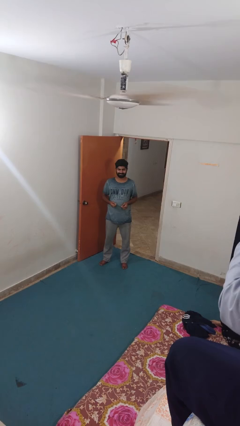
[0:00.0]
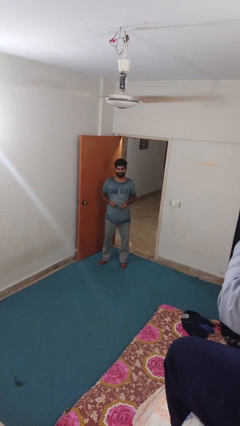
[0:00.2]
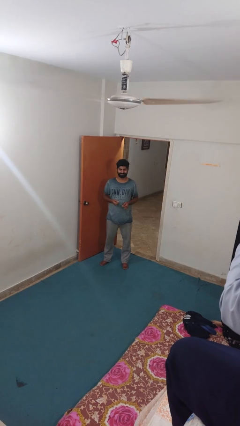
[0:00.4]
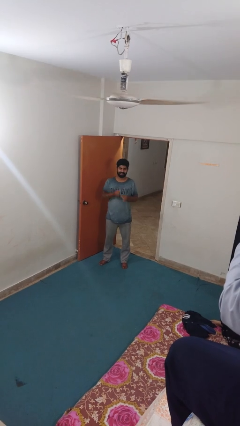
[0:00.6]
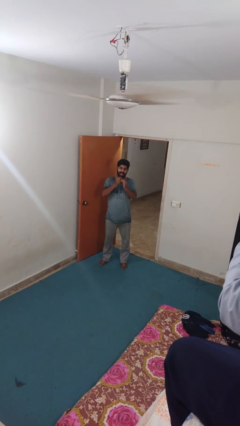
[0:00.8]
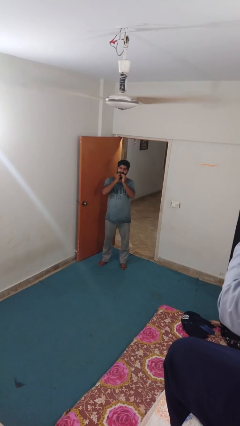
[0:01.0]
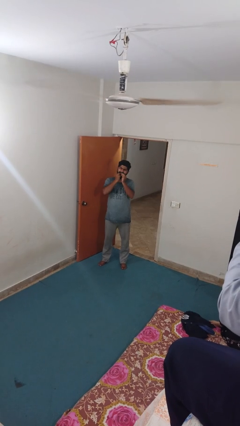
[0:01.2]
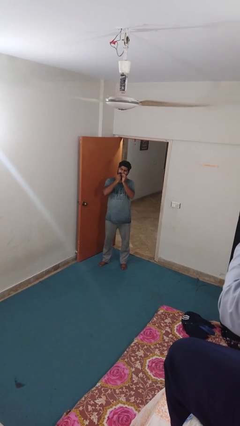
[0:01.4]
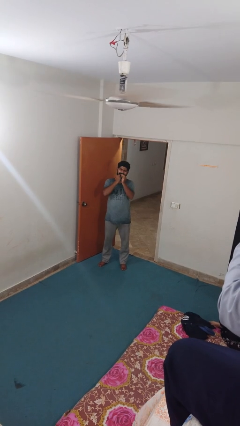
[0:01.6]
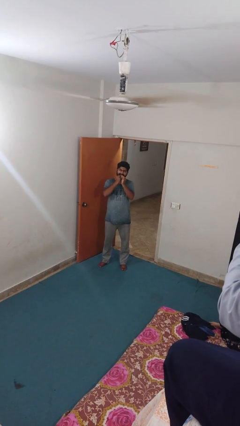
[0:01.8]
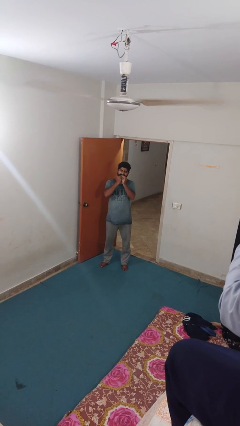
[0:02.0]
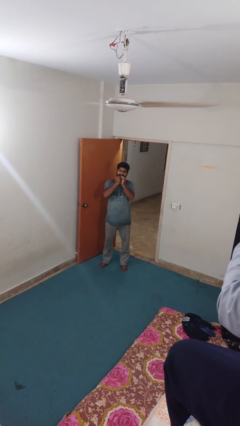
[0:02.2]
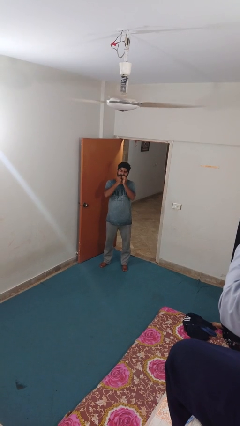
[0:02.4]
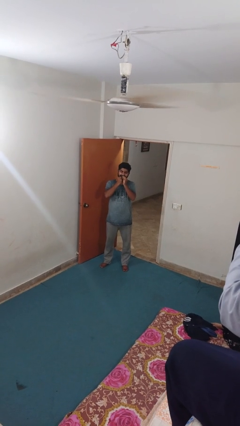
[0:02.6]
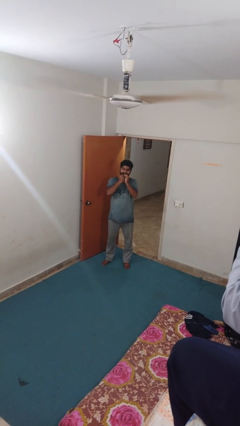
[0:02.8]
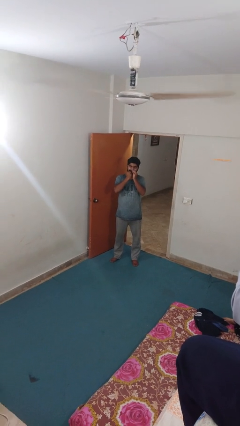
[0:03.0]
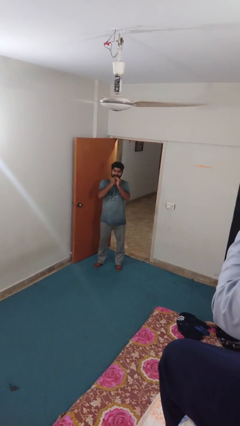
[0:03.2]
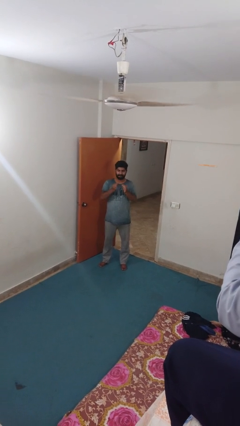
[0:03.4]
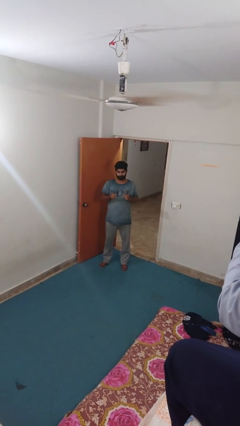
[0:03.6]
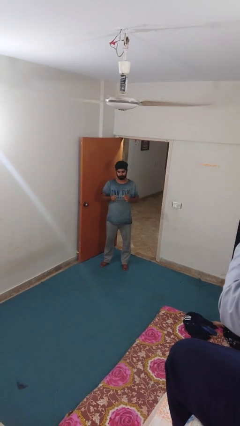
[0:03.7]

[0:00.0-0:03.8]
person flosses

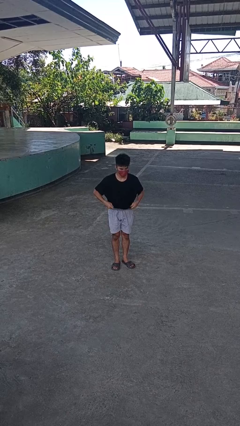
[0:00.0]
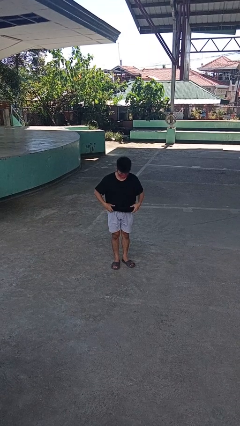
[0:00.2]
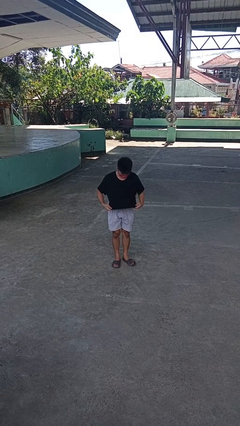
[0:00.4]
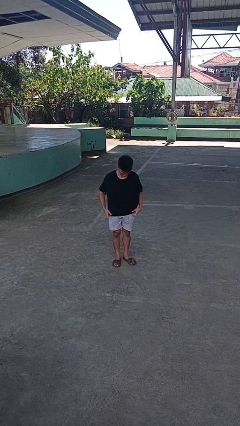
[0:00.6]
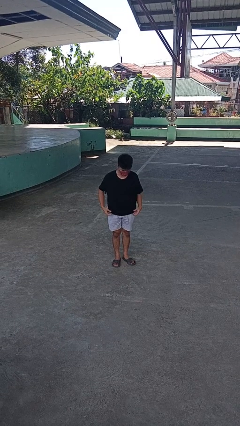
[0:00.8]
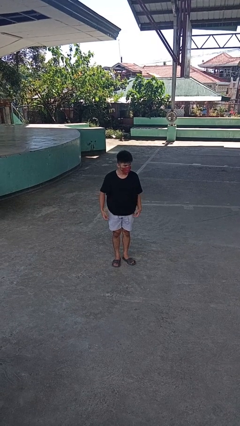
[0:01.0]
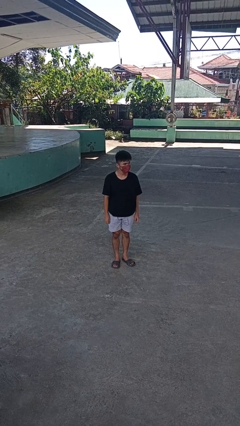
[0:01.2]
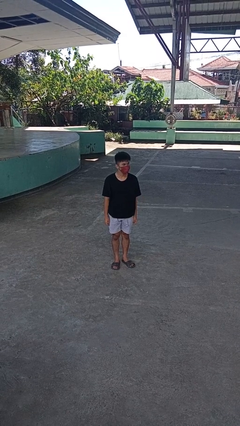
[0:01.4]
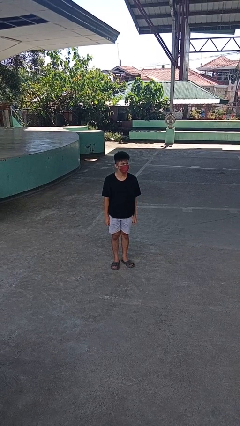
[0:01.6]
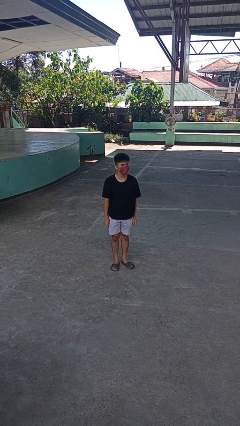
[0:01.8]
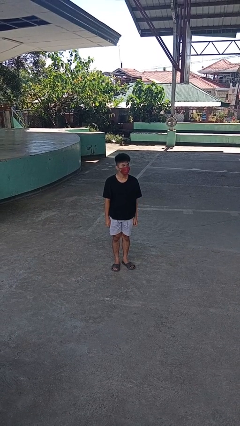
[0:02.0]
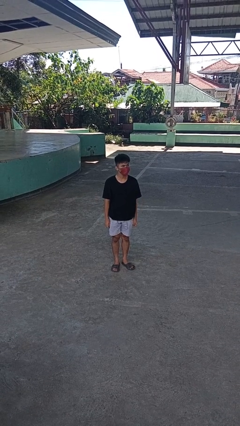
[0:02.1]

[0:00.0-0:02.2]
person untucks shirt

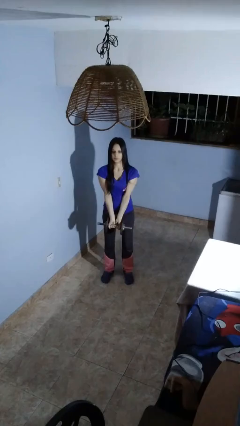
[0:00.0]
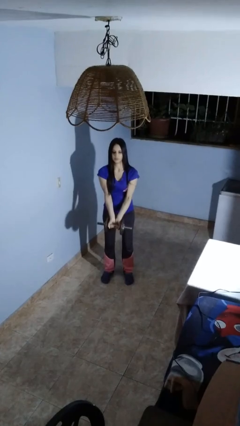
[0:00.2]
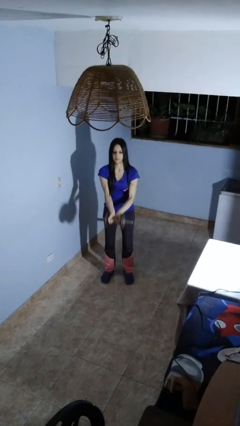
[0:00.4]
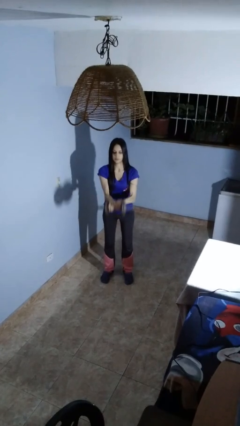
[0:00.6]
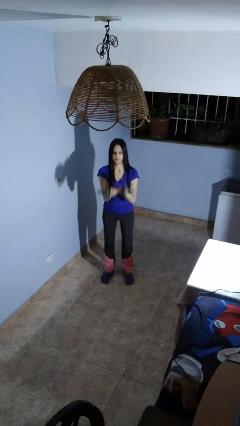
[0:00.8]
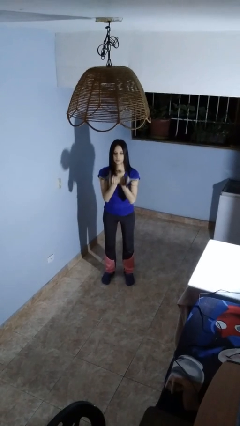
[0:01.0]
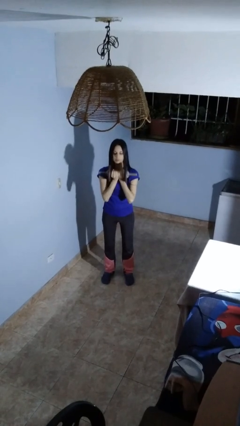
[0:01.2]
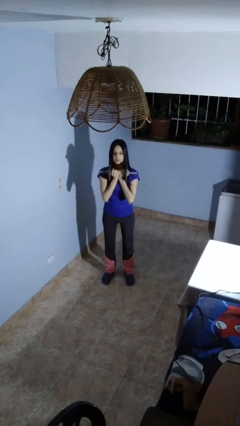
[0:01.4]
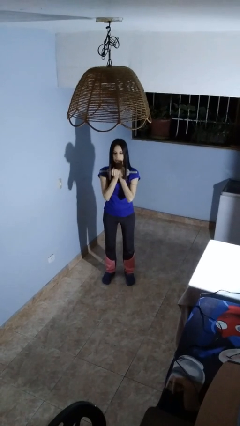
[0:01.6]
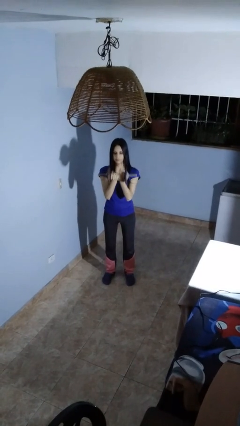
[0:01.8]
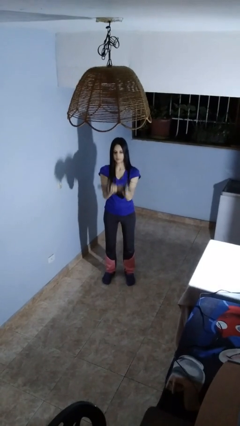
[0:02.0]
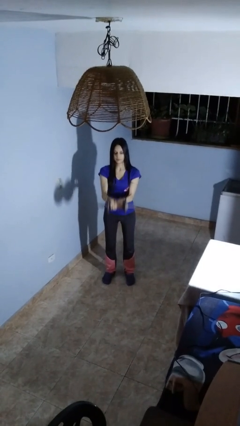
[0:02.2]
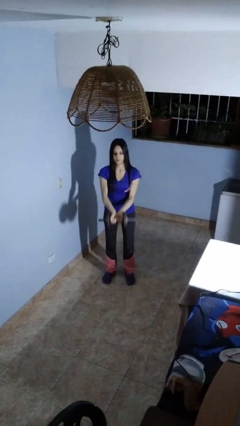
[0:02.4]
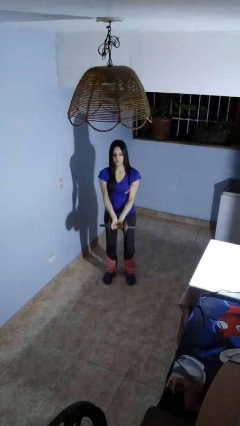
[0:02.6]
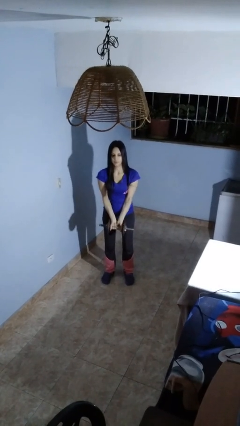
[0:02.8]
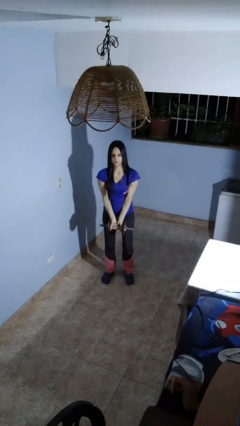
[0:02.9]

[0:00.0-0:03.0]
person lifts dumbbells

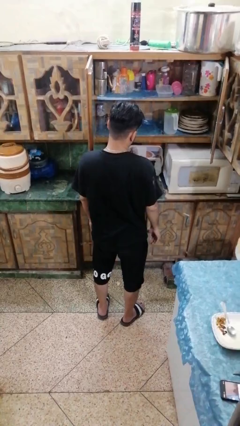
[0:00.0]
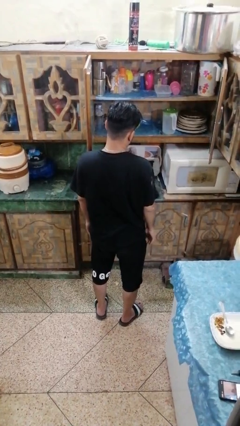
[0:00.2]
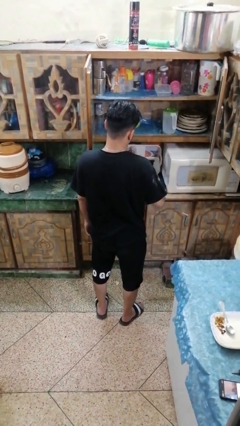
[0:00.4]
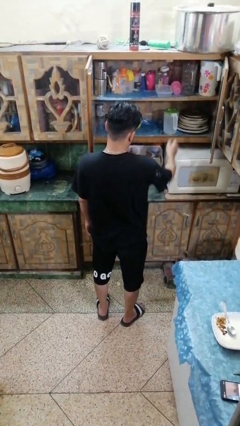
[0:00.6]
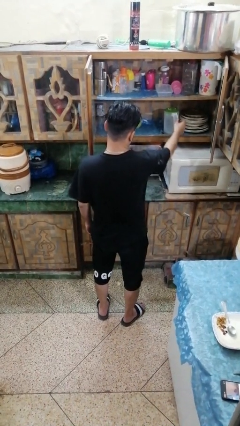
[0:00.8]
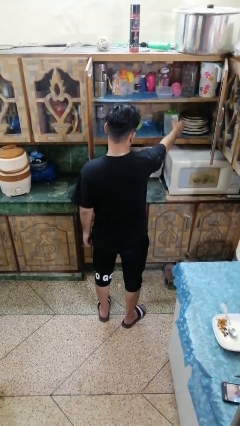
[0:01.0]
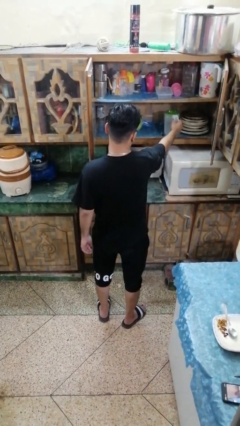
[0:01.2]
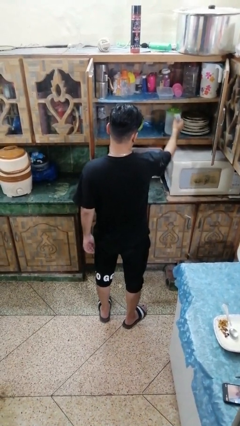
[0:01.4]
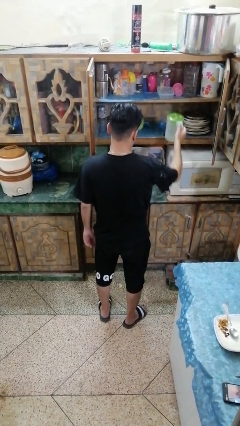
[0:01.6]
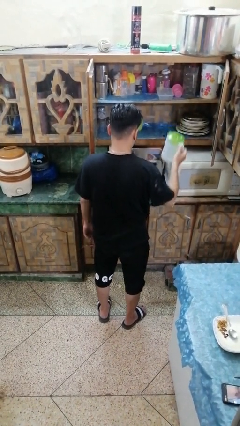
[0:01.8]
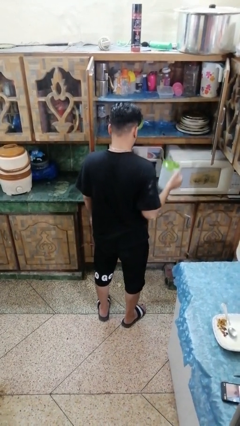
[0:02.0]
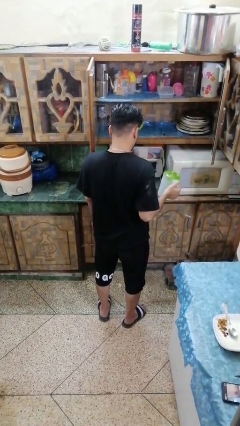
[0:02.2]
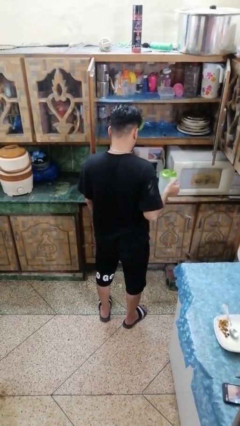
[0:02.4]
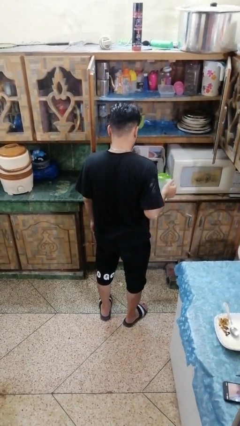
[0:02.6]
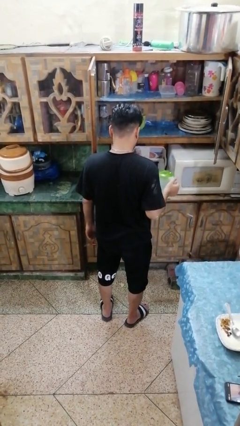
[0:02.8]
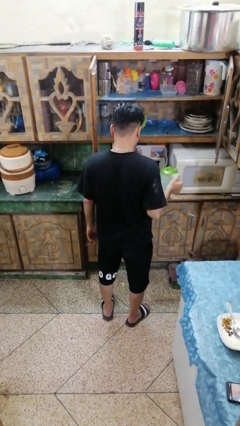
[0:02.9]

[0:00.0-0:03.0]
person picks up object from cabinet

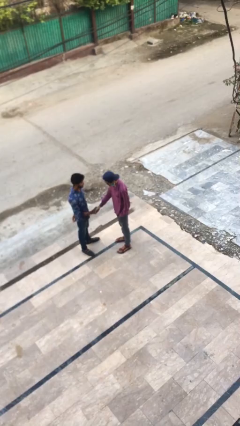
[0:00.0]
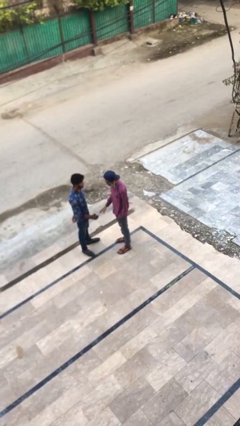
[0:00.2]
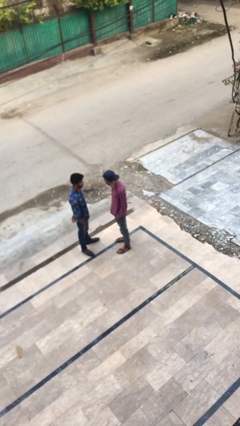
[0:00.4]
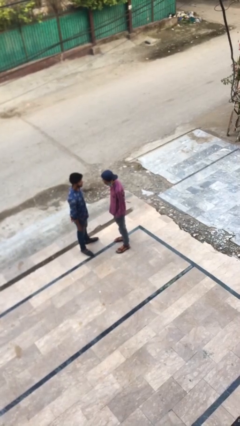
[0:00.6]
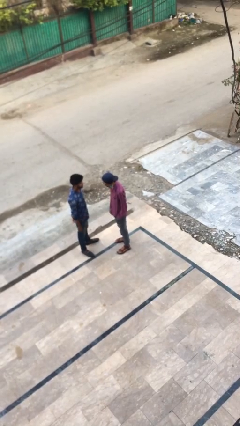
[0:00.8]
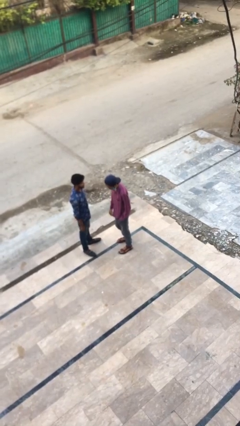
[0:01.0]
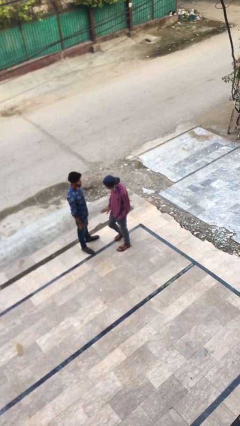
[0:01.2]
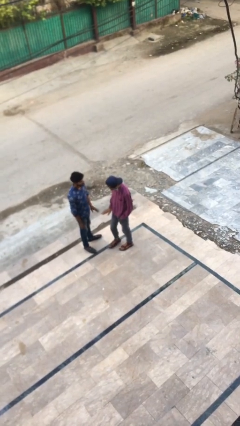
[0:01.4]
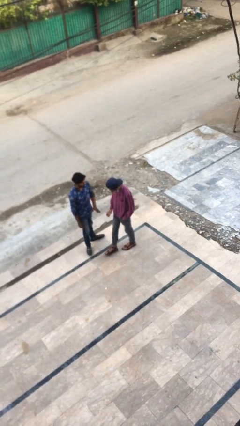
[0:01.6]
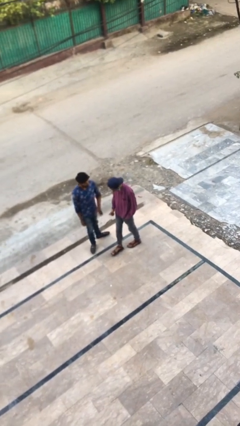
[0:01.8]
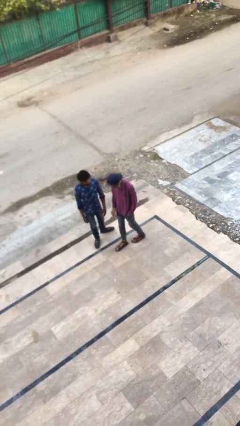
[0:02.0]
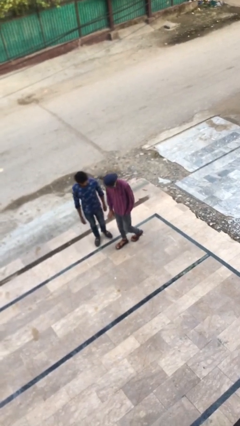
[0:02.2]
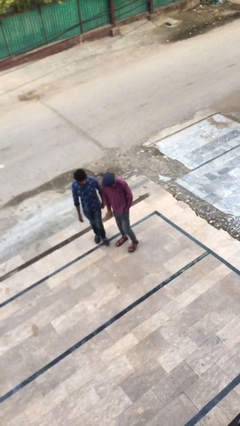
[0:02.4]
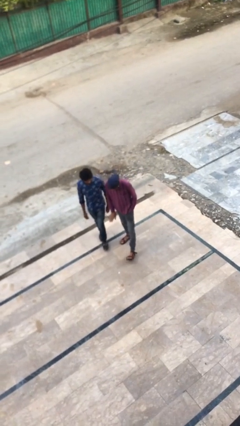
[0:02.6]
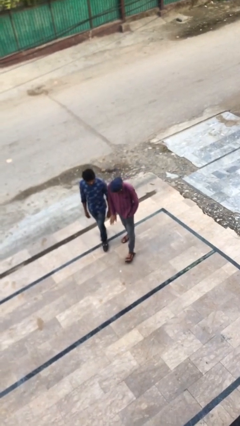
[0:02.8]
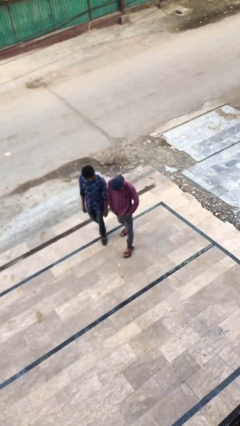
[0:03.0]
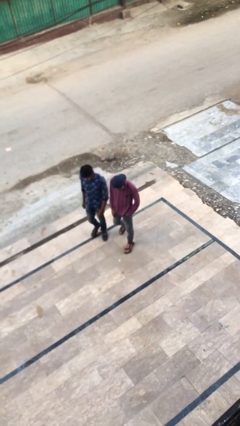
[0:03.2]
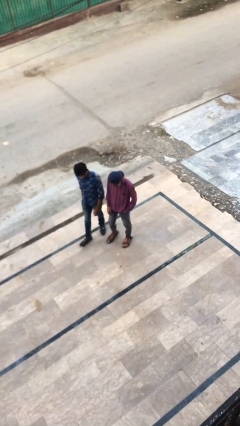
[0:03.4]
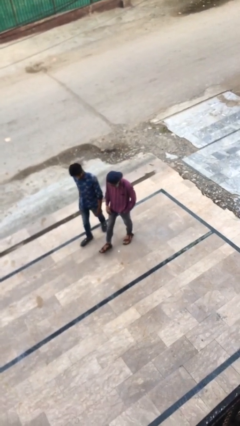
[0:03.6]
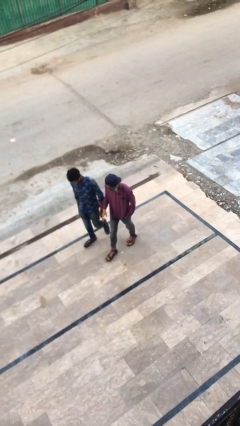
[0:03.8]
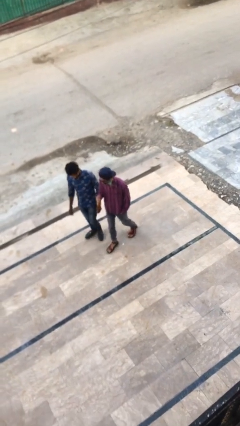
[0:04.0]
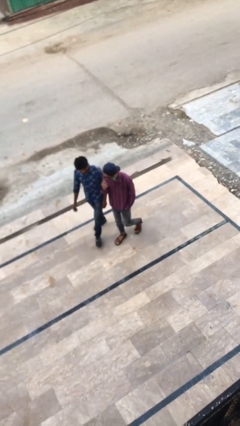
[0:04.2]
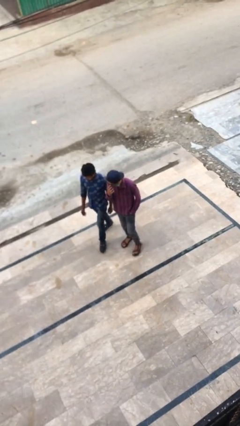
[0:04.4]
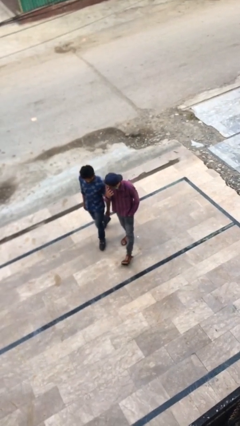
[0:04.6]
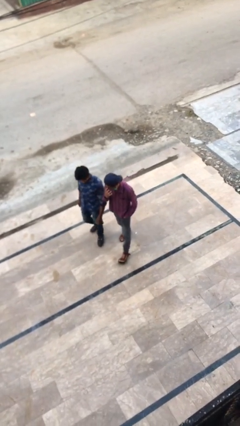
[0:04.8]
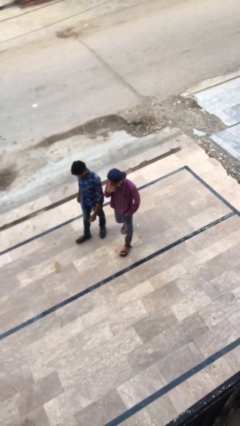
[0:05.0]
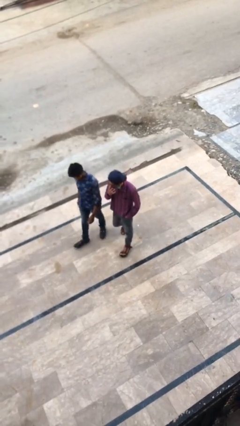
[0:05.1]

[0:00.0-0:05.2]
person talks to person

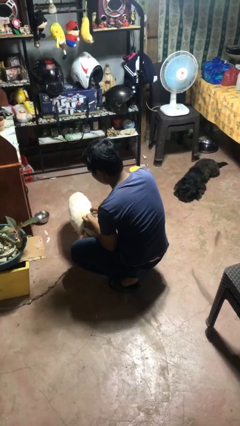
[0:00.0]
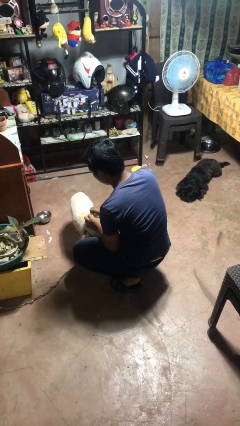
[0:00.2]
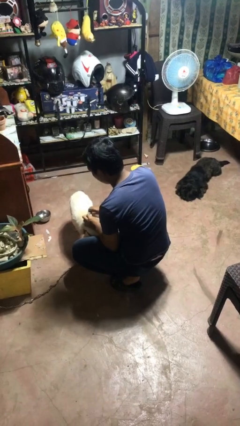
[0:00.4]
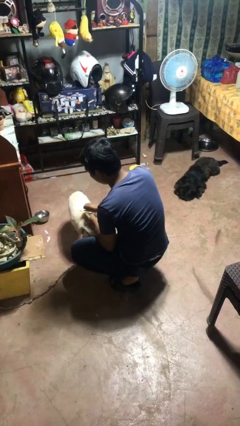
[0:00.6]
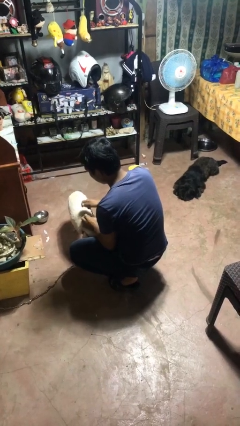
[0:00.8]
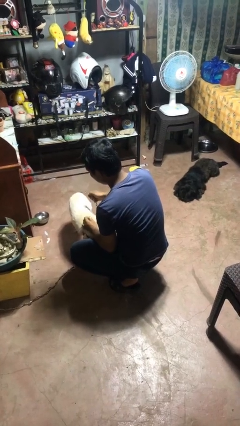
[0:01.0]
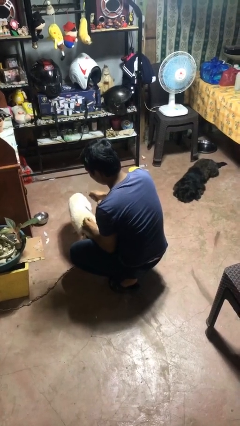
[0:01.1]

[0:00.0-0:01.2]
person unattaches leash from dog
